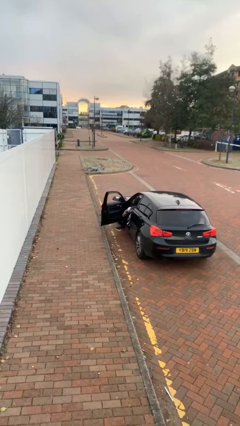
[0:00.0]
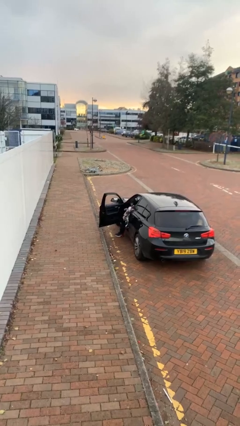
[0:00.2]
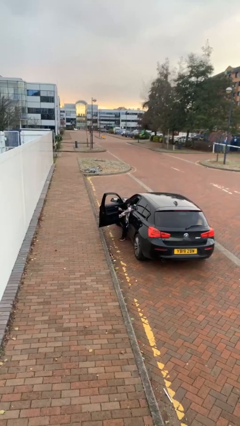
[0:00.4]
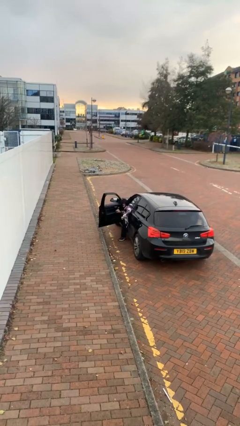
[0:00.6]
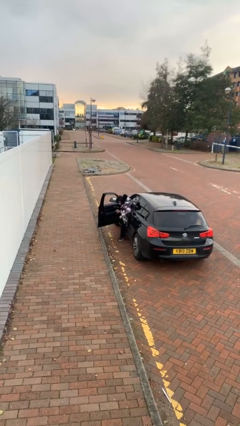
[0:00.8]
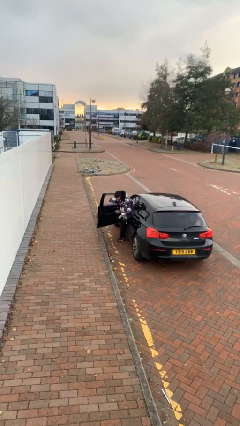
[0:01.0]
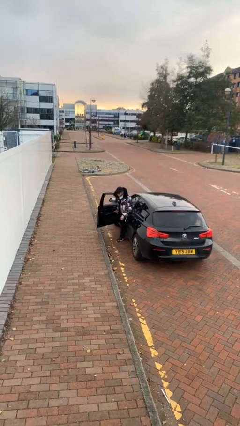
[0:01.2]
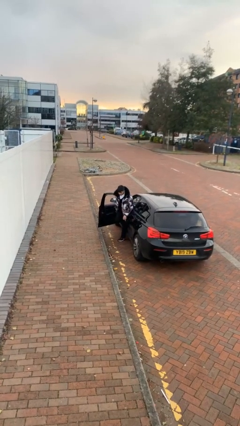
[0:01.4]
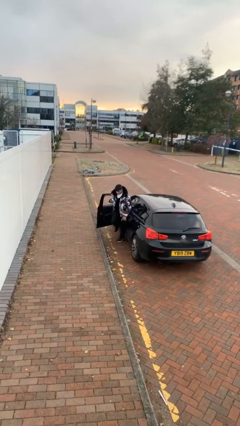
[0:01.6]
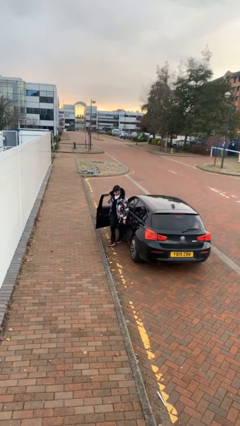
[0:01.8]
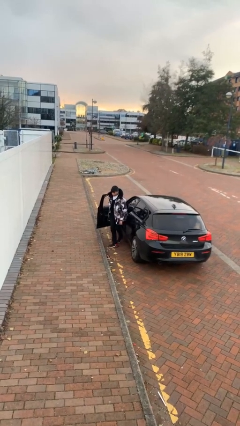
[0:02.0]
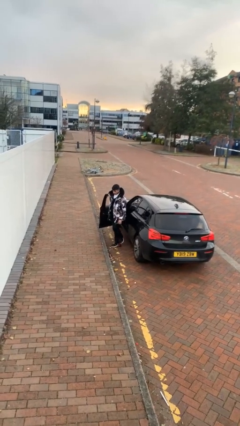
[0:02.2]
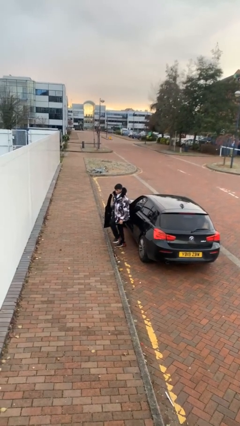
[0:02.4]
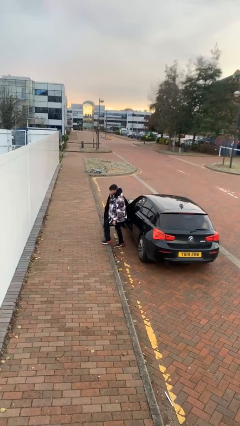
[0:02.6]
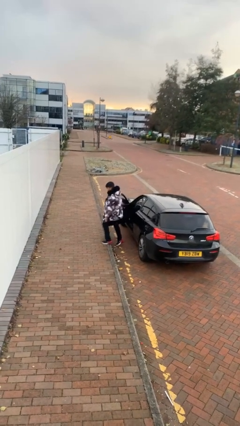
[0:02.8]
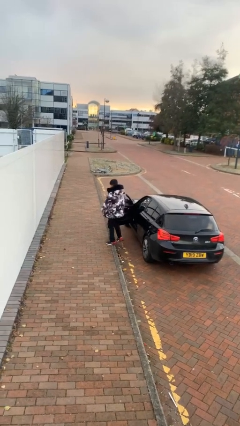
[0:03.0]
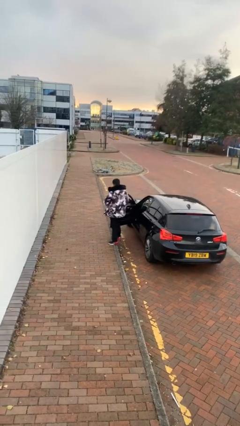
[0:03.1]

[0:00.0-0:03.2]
person exits car

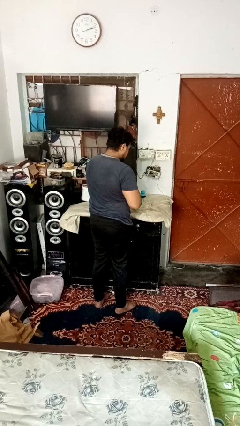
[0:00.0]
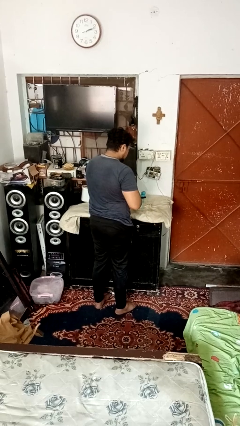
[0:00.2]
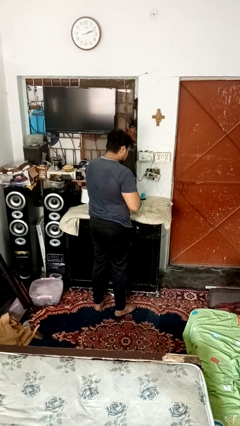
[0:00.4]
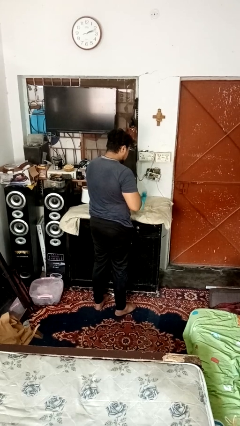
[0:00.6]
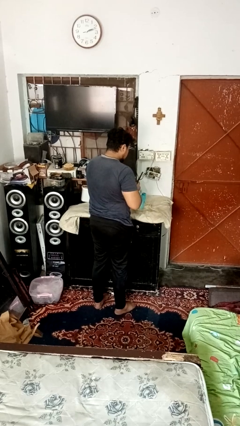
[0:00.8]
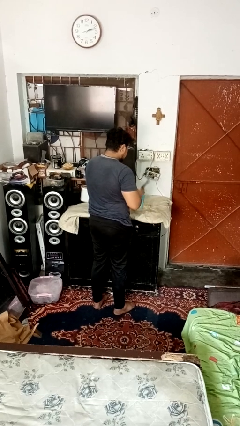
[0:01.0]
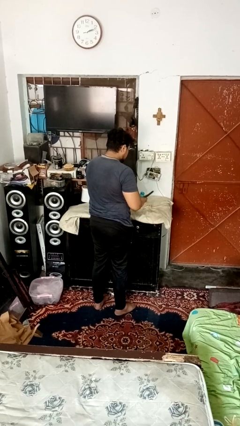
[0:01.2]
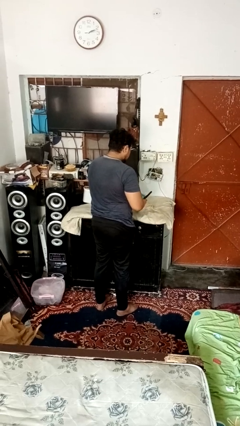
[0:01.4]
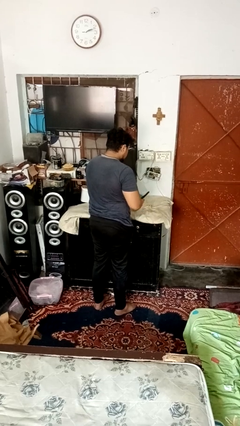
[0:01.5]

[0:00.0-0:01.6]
person opens can with can opener

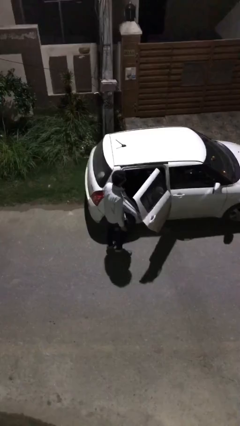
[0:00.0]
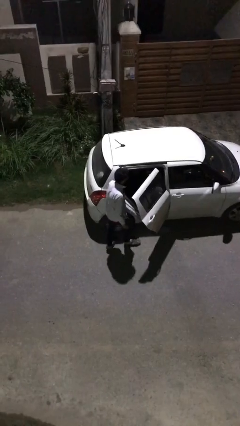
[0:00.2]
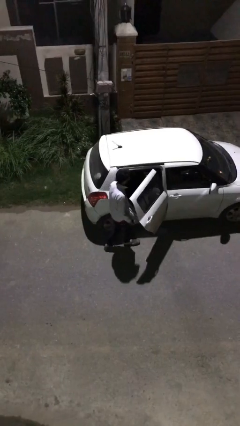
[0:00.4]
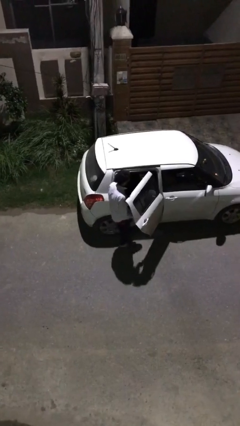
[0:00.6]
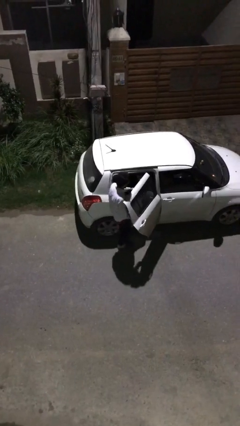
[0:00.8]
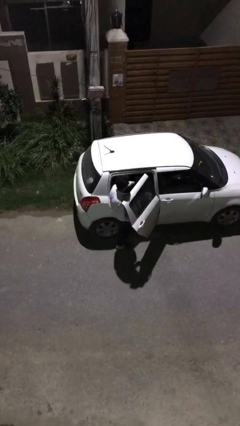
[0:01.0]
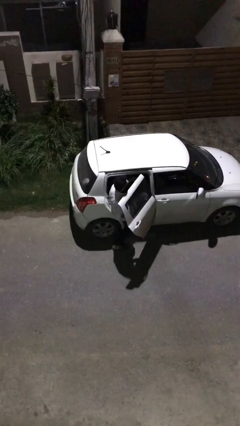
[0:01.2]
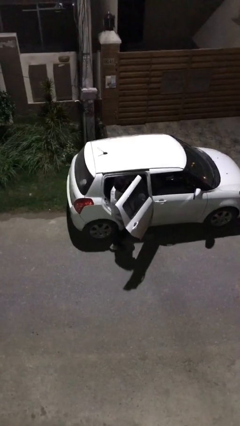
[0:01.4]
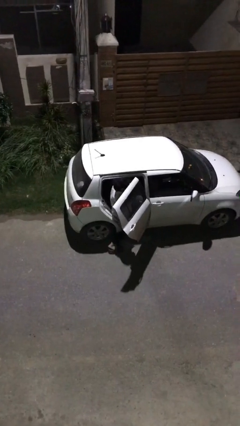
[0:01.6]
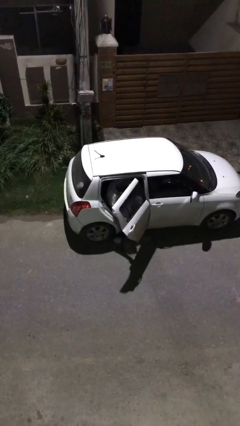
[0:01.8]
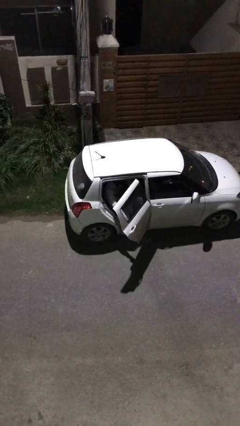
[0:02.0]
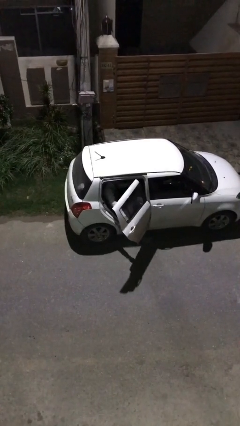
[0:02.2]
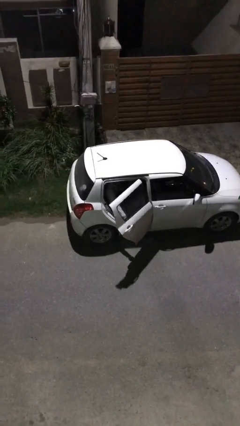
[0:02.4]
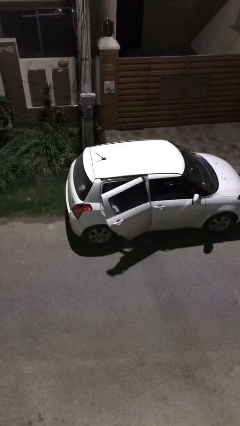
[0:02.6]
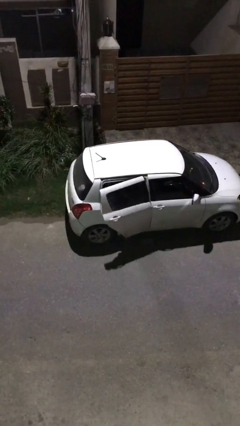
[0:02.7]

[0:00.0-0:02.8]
person enters car

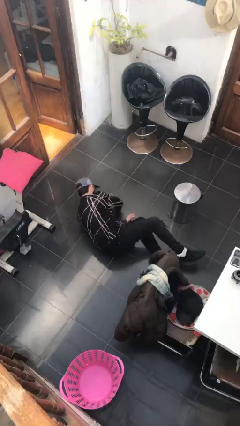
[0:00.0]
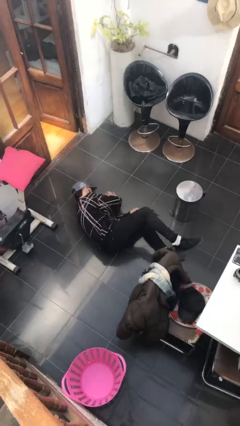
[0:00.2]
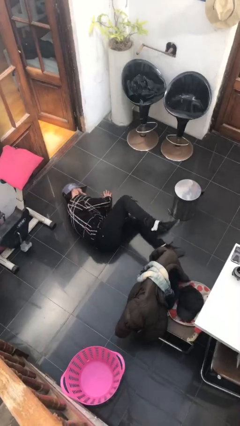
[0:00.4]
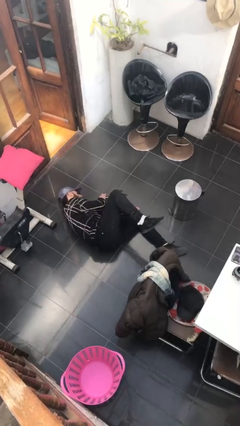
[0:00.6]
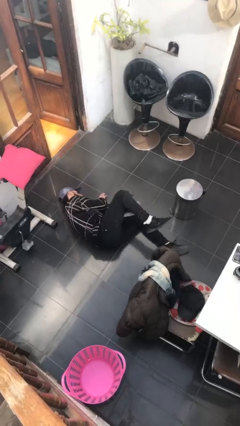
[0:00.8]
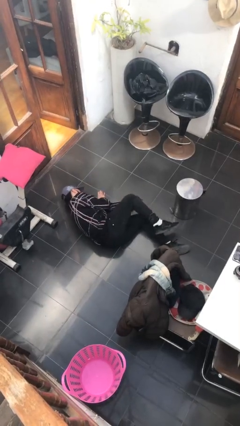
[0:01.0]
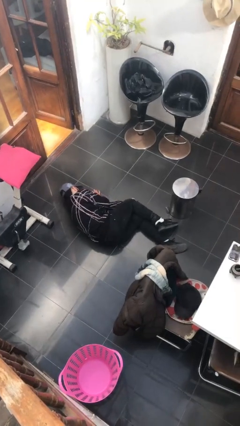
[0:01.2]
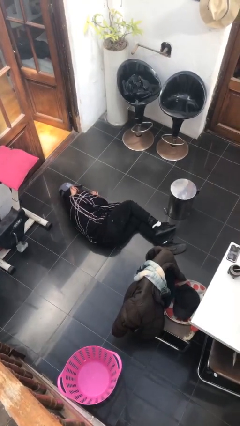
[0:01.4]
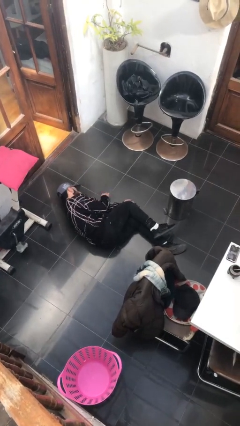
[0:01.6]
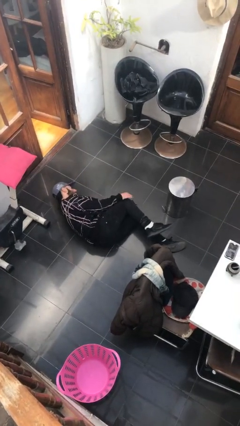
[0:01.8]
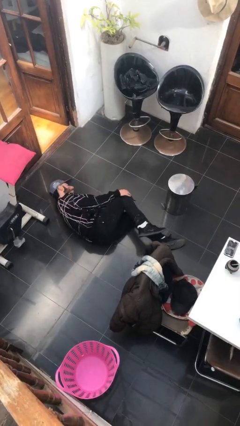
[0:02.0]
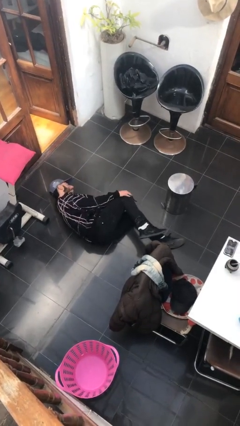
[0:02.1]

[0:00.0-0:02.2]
person lies down on floor

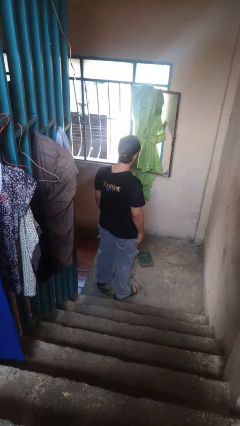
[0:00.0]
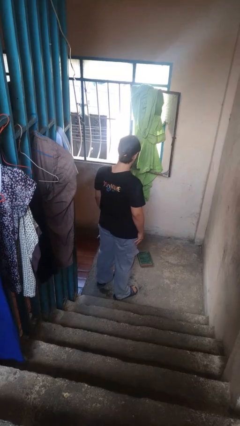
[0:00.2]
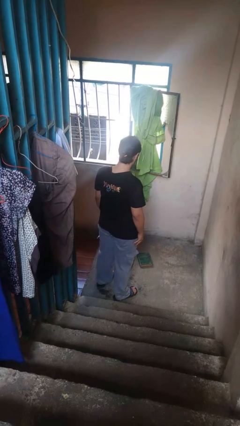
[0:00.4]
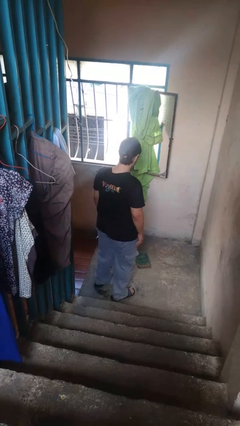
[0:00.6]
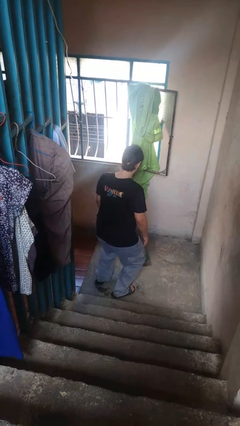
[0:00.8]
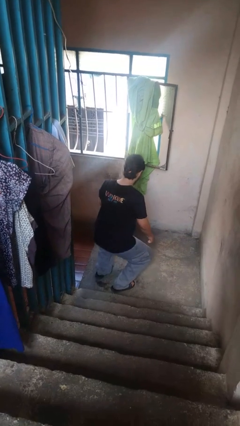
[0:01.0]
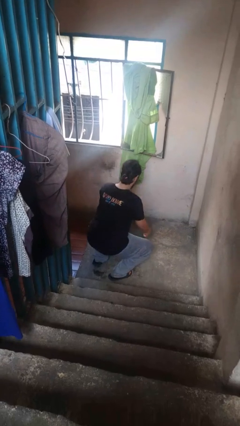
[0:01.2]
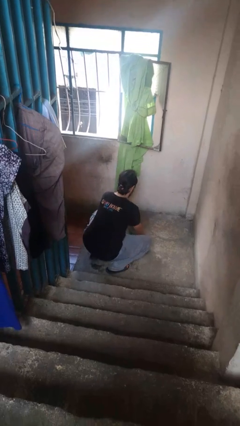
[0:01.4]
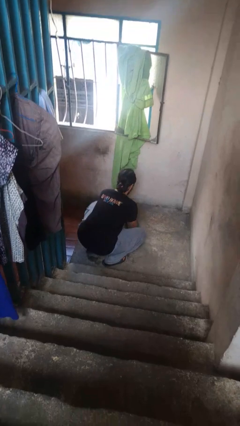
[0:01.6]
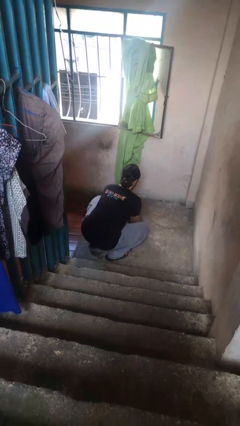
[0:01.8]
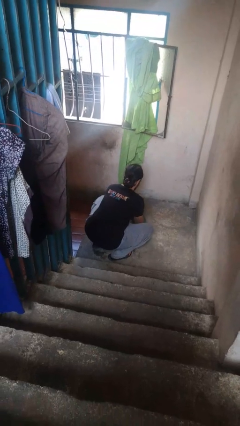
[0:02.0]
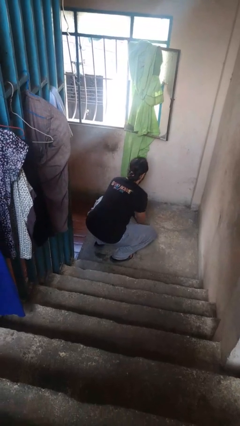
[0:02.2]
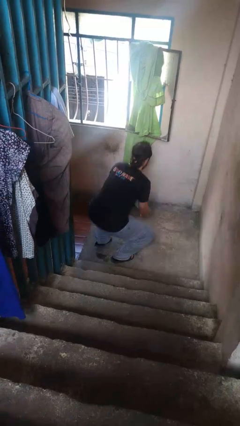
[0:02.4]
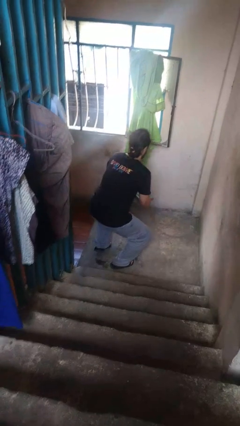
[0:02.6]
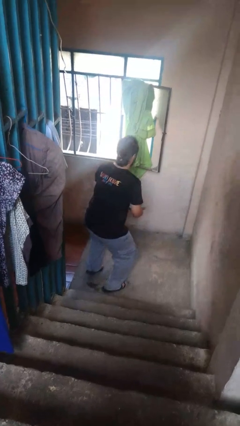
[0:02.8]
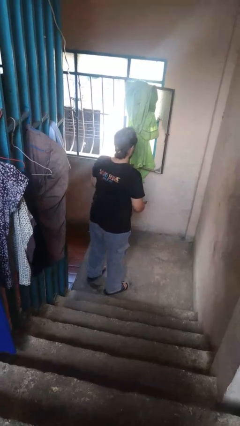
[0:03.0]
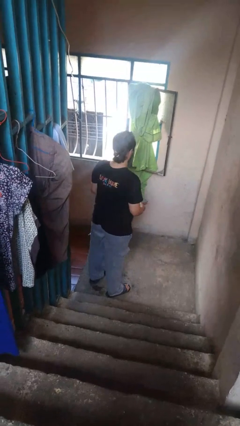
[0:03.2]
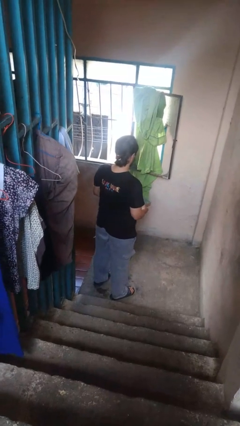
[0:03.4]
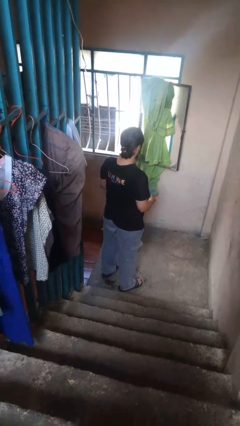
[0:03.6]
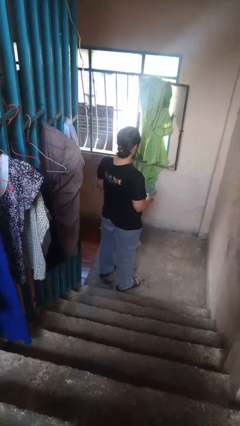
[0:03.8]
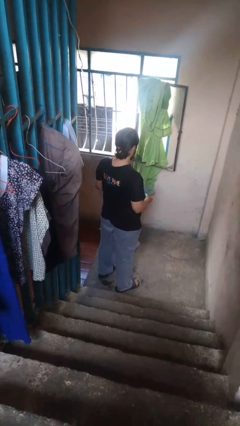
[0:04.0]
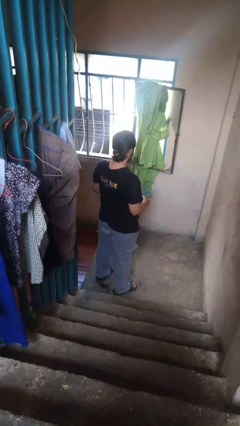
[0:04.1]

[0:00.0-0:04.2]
person picks up object from floor

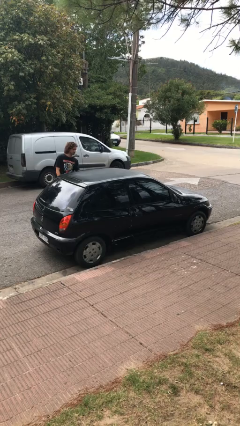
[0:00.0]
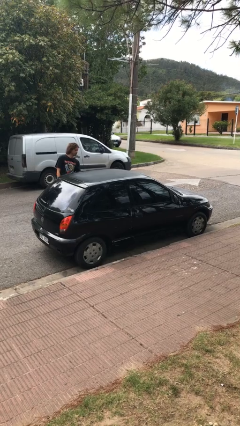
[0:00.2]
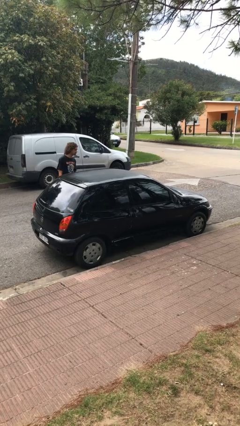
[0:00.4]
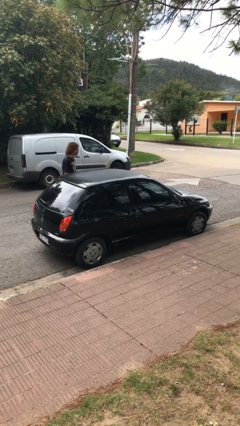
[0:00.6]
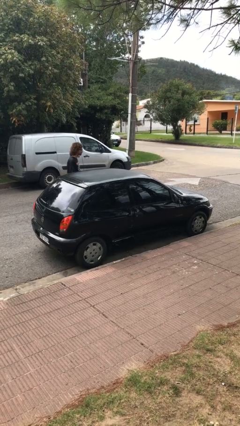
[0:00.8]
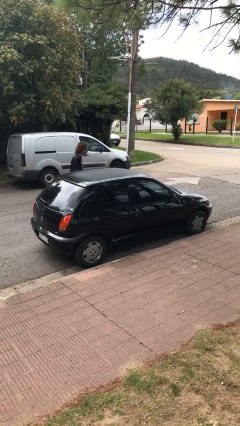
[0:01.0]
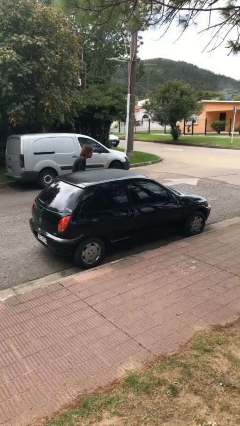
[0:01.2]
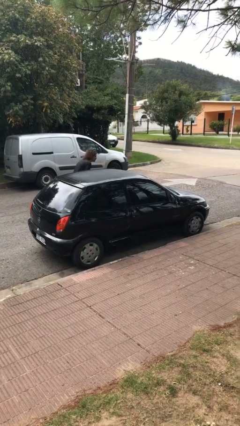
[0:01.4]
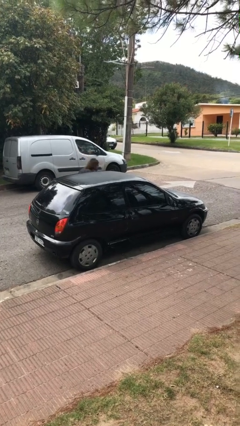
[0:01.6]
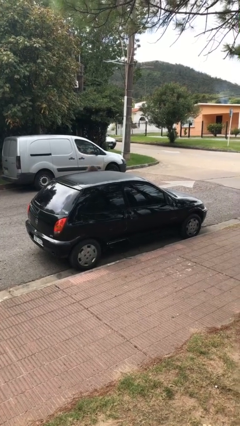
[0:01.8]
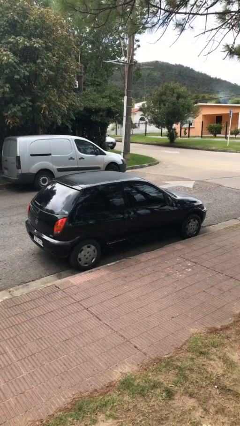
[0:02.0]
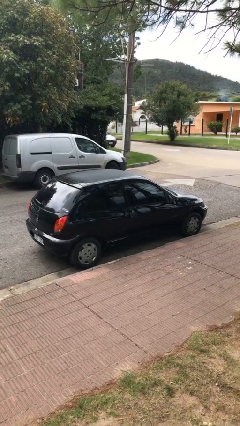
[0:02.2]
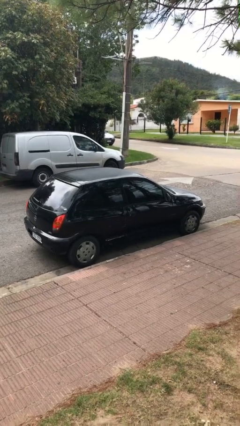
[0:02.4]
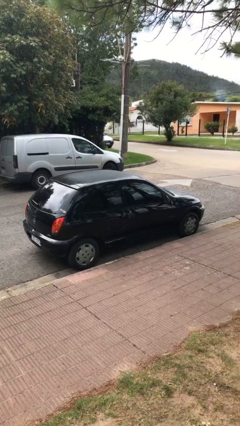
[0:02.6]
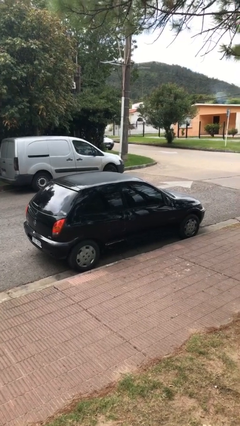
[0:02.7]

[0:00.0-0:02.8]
car picks up person

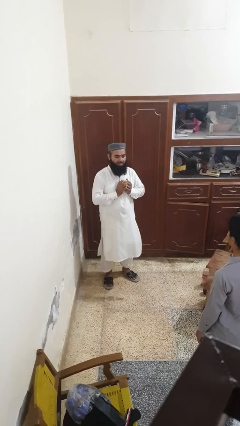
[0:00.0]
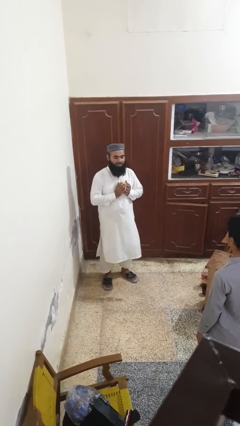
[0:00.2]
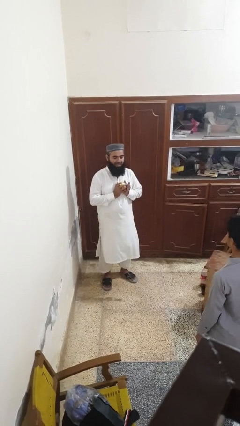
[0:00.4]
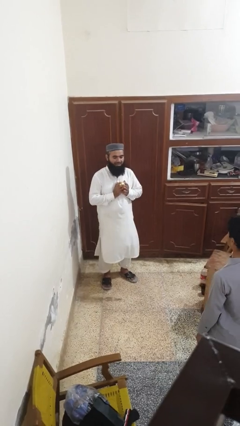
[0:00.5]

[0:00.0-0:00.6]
person catches object from person
